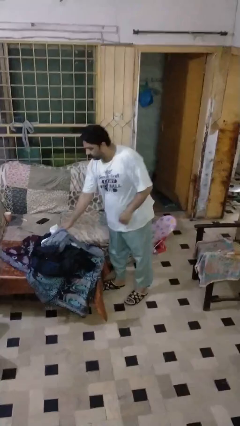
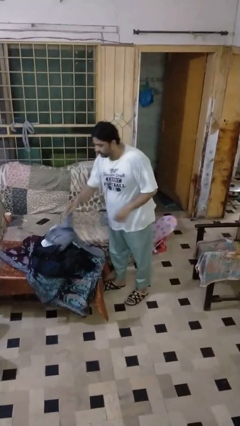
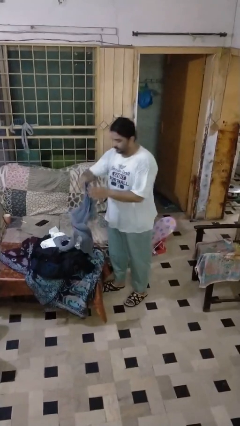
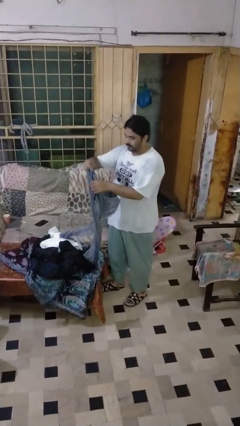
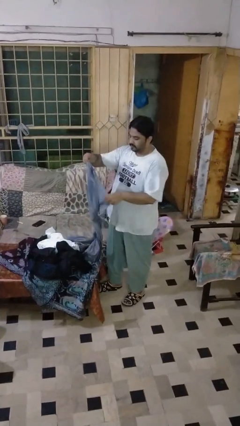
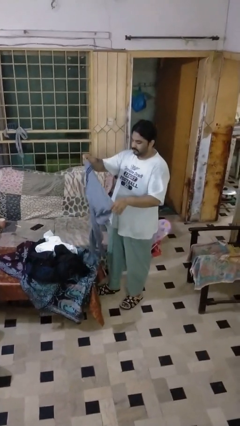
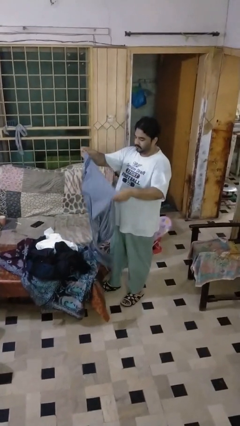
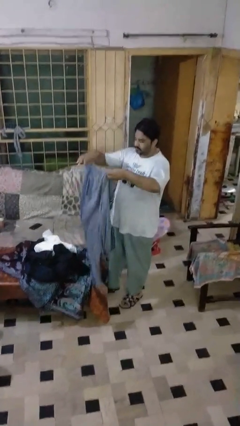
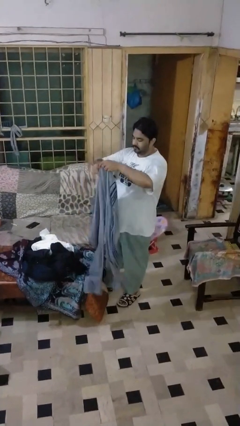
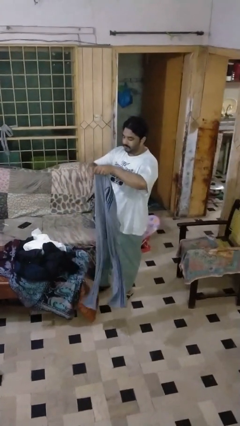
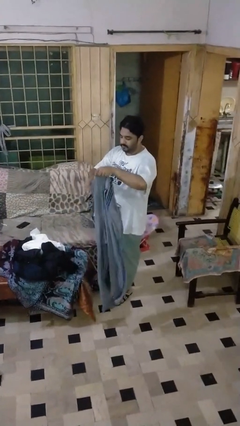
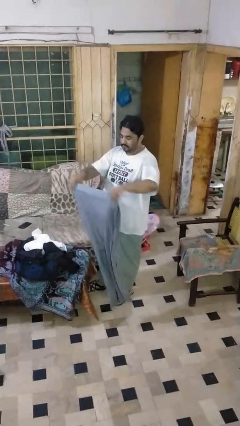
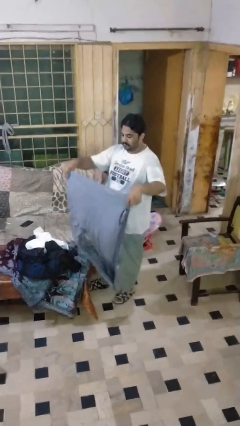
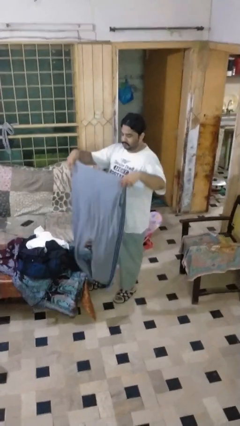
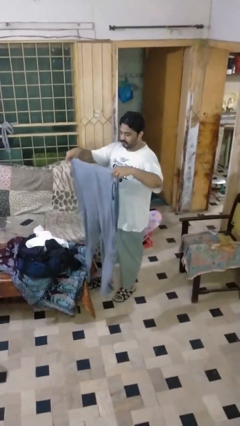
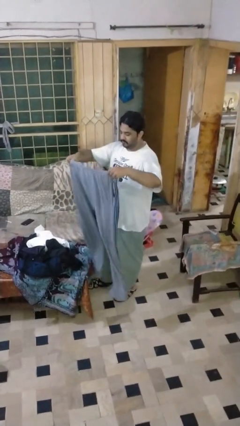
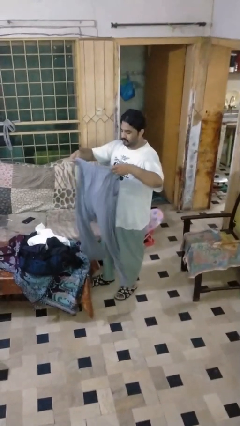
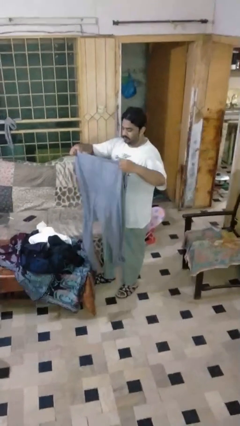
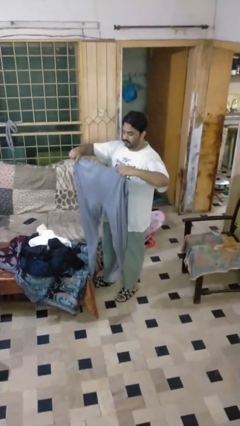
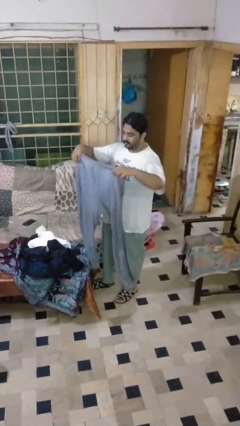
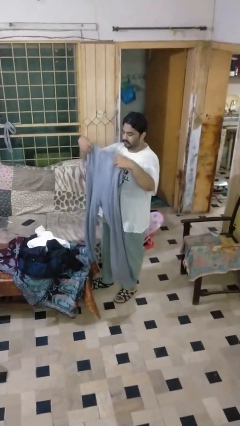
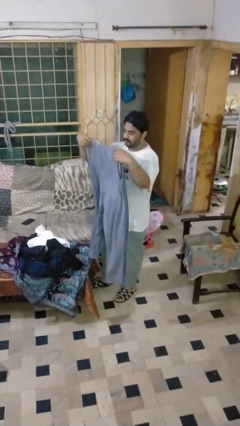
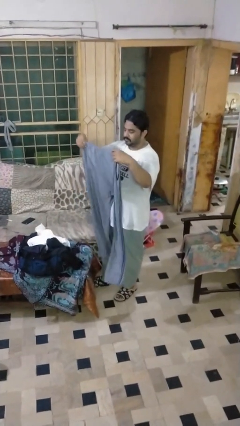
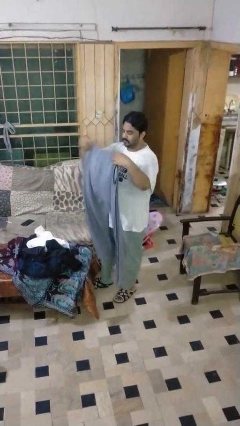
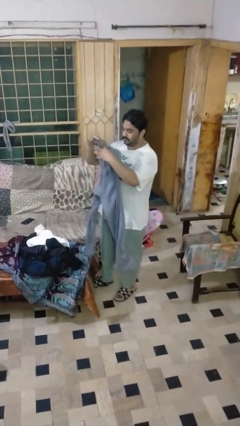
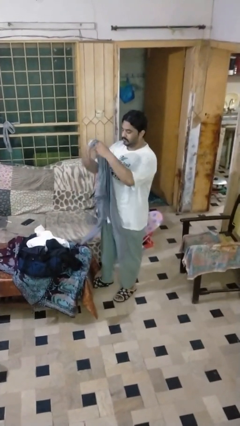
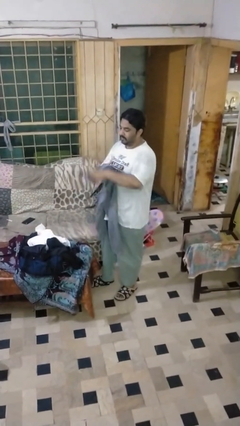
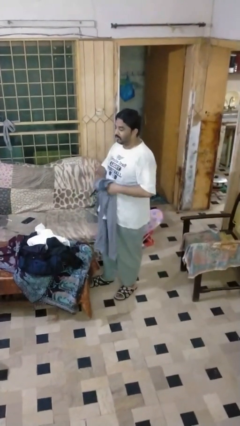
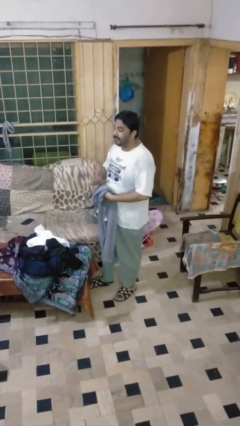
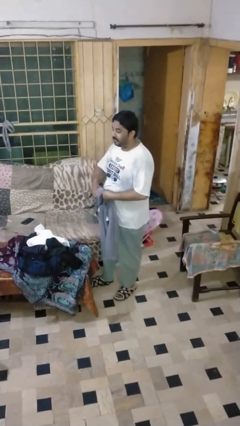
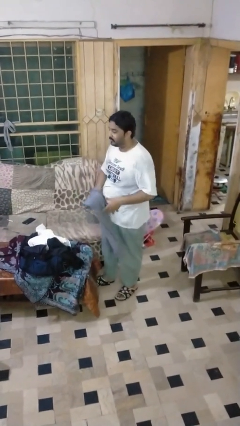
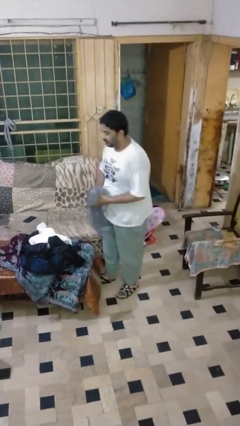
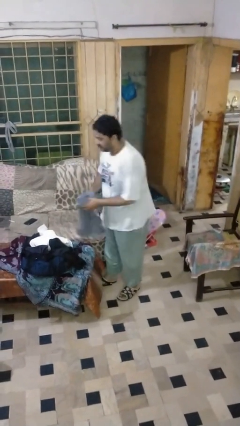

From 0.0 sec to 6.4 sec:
person folds pants

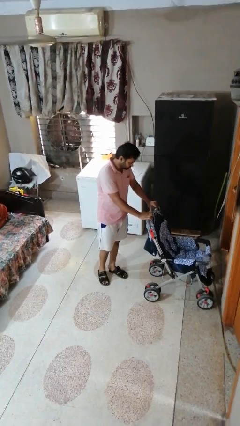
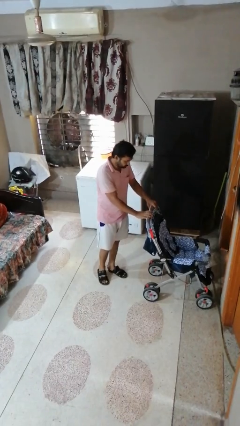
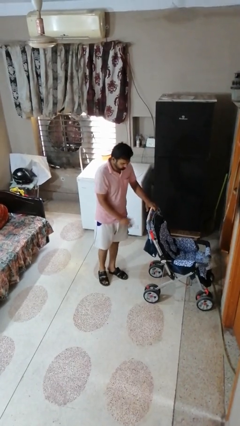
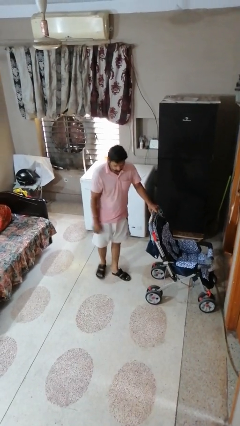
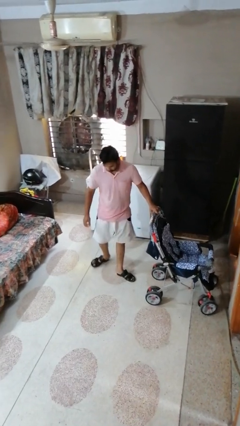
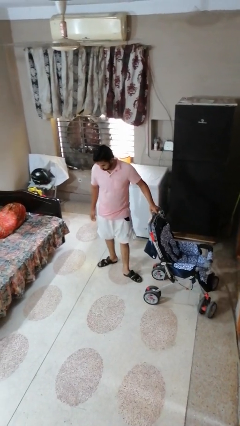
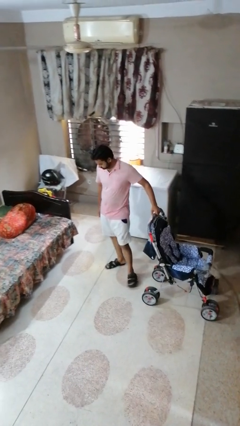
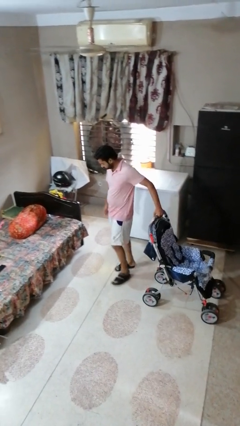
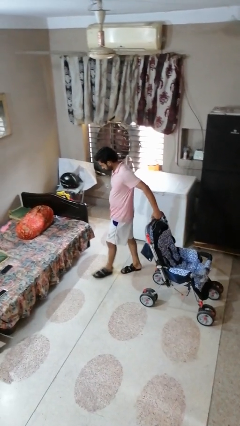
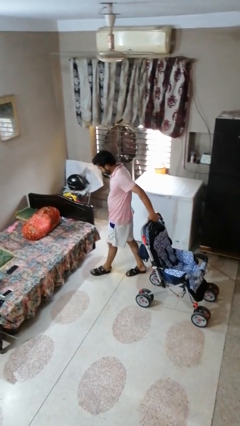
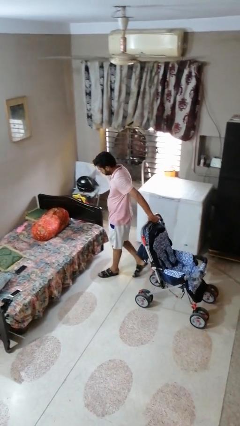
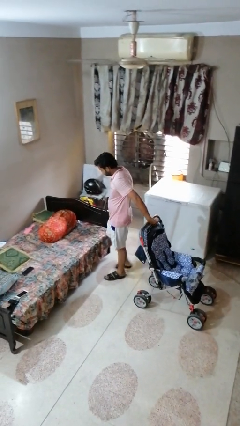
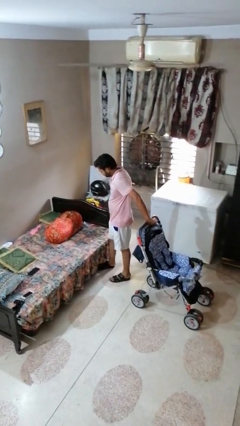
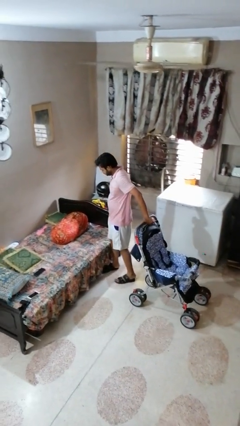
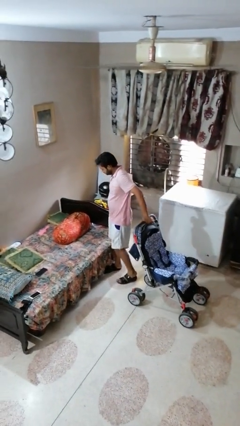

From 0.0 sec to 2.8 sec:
person pulls wheeled cart

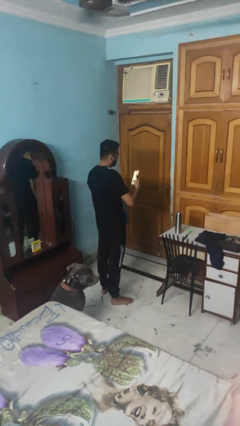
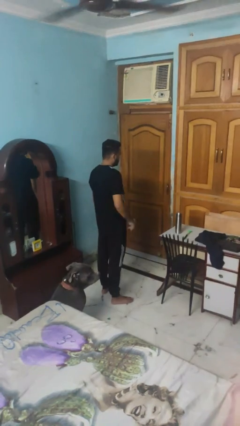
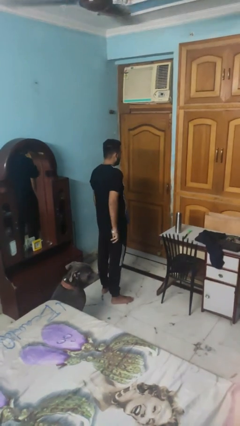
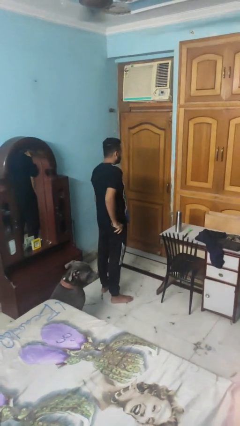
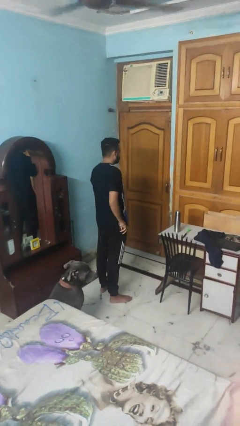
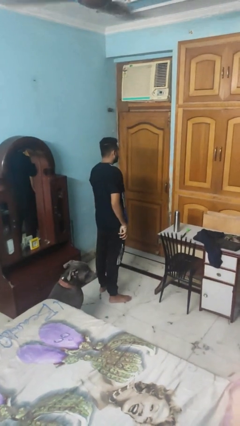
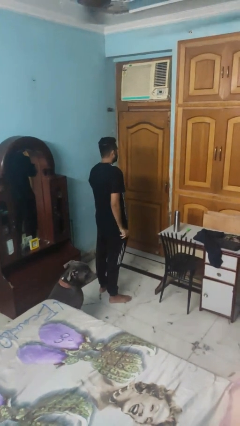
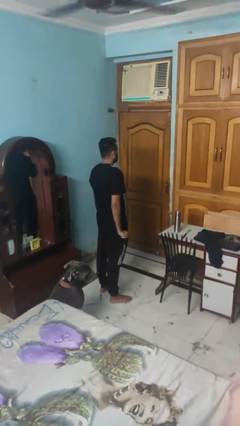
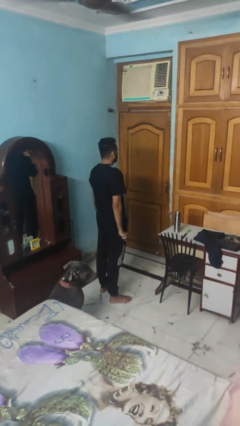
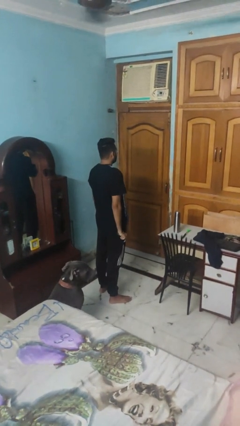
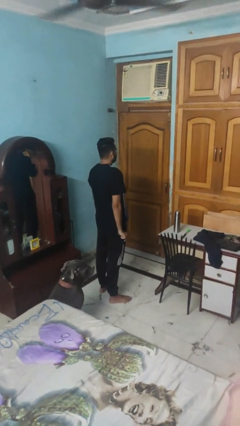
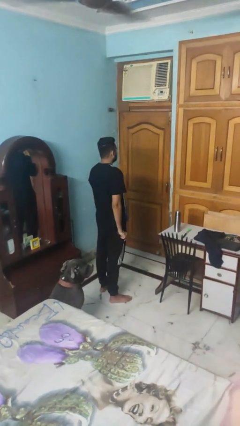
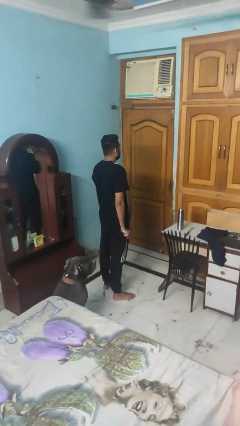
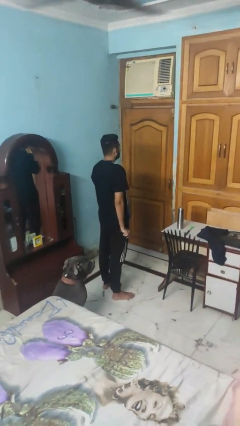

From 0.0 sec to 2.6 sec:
person puts phone into pocket

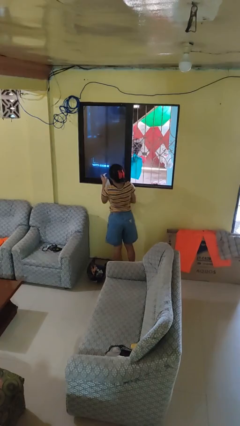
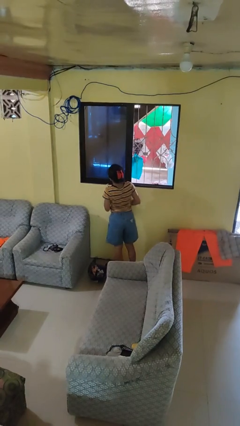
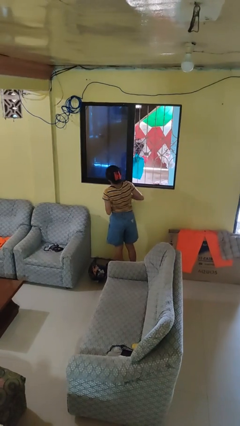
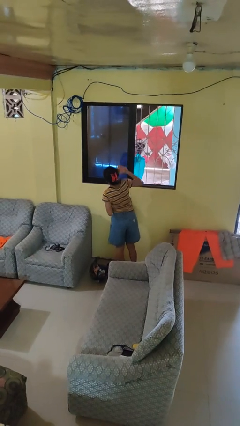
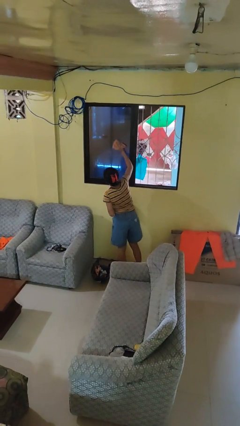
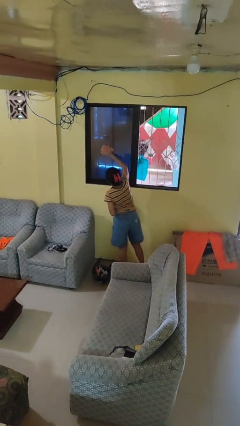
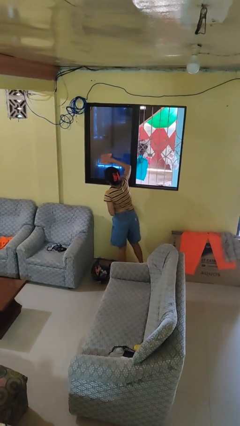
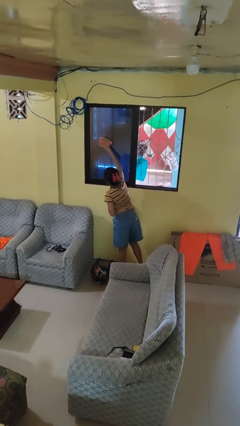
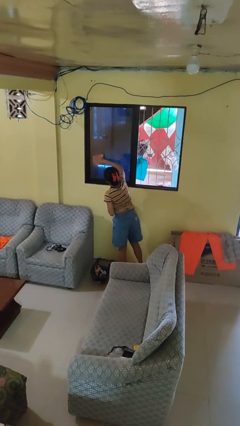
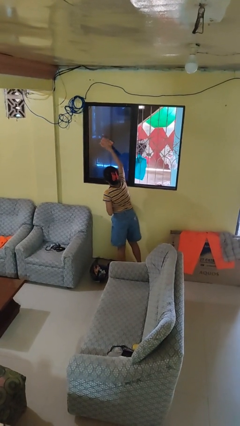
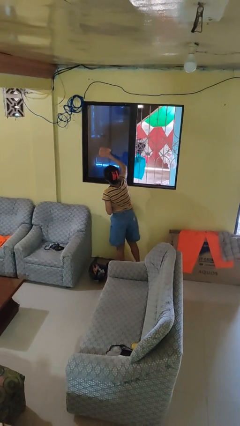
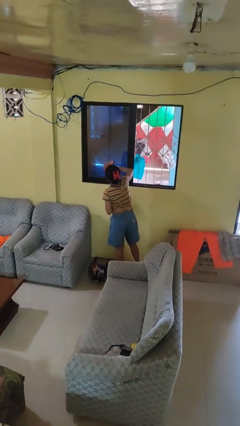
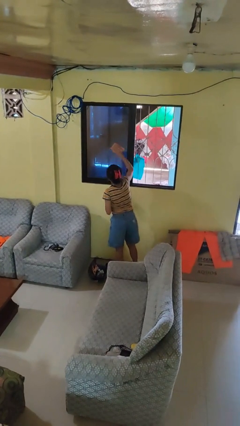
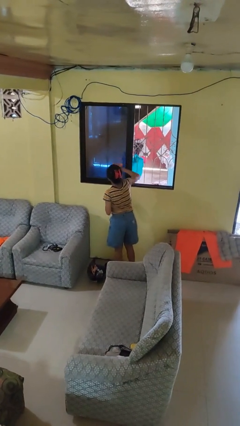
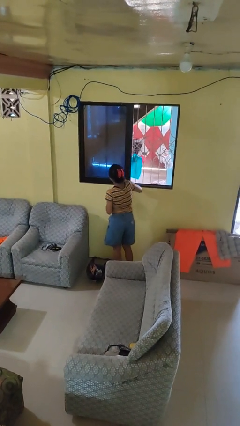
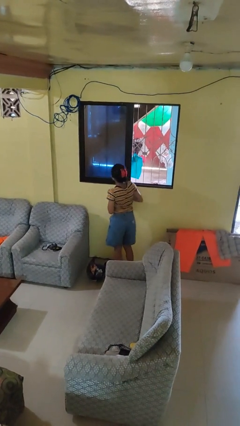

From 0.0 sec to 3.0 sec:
person washes window

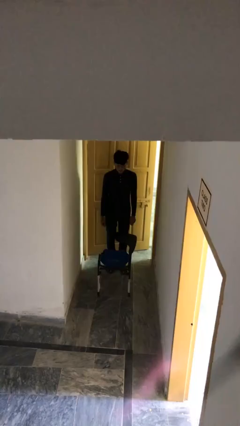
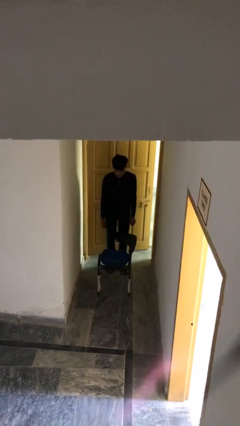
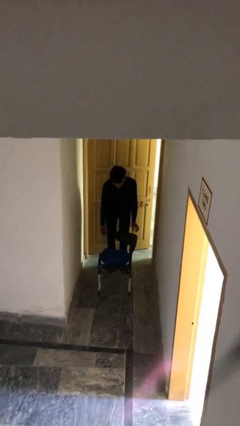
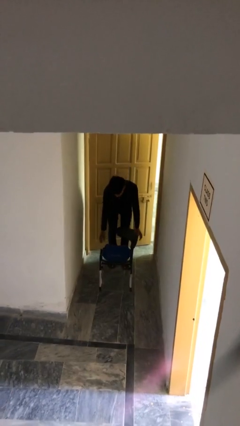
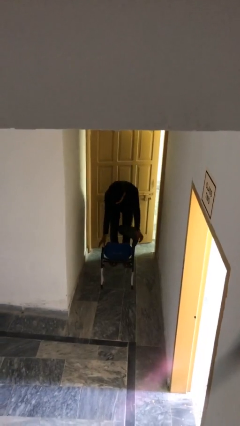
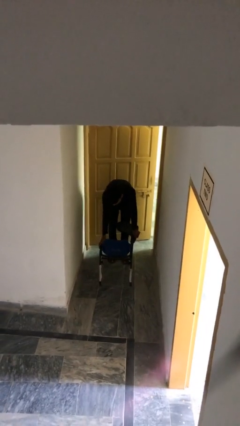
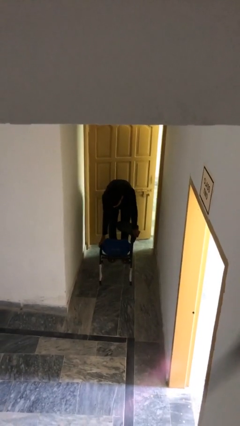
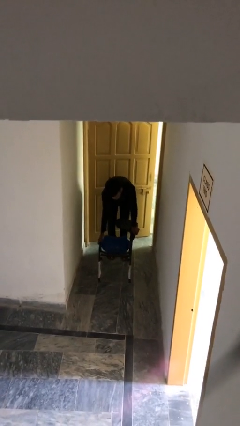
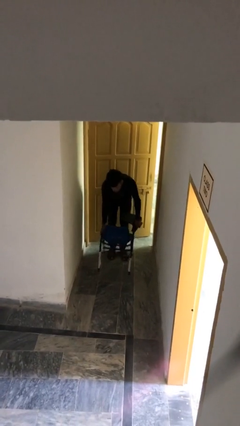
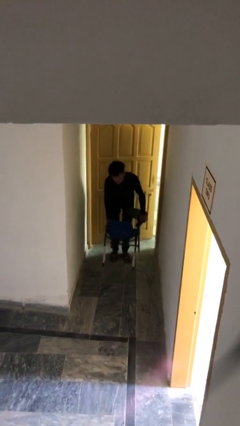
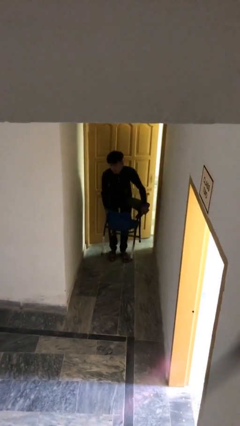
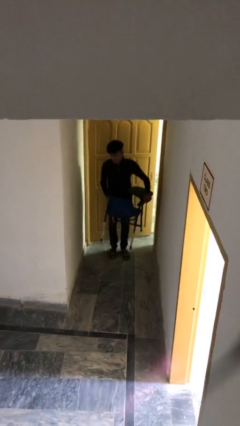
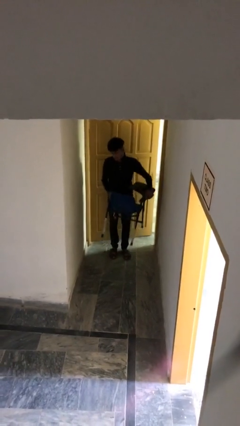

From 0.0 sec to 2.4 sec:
person picks up object from floor

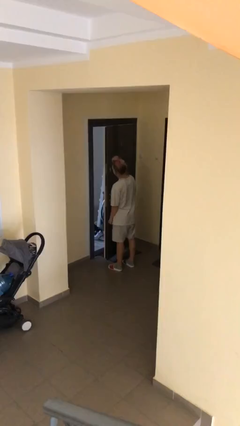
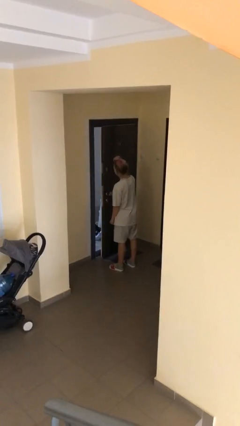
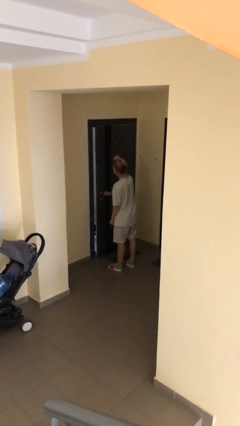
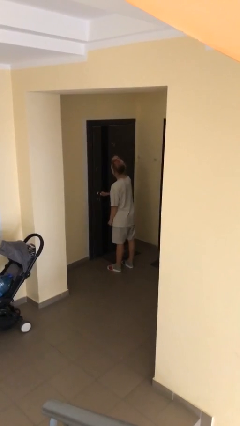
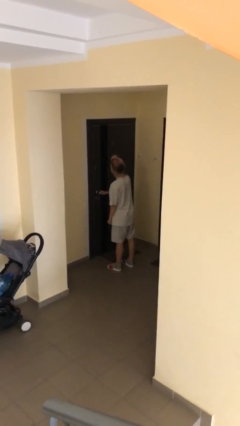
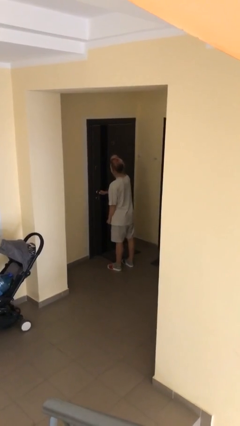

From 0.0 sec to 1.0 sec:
person closes facility door
